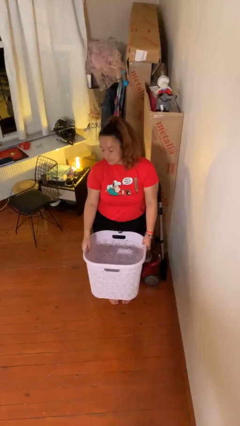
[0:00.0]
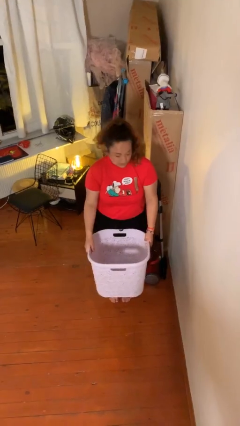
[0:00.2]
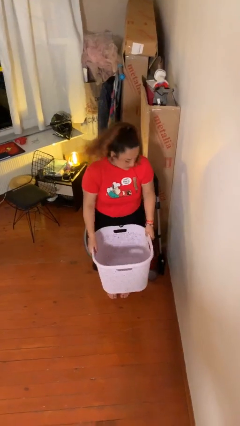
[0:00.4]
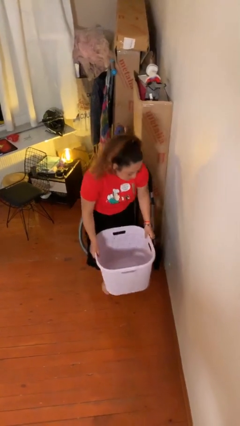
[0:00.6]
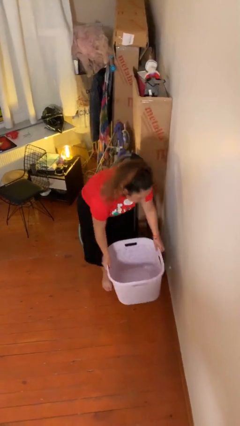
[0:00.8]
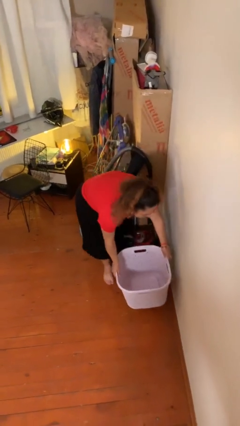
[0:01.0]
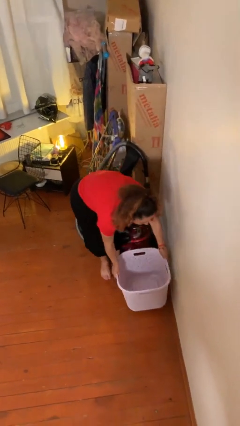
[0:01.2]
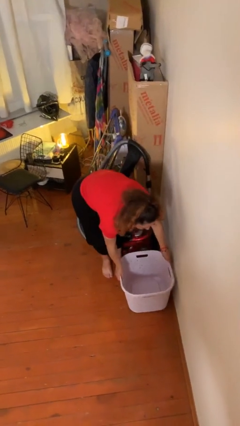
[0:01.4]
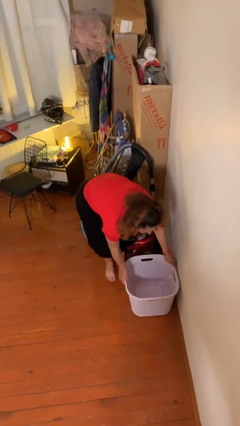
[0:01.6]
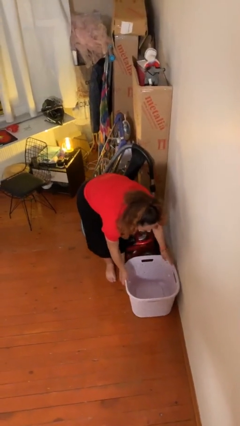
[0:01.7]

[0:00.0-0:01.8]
person puts down object on floor

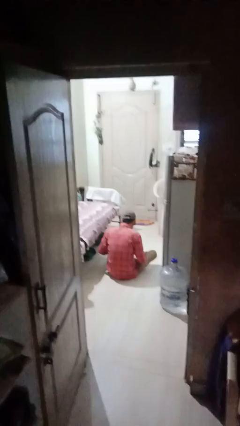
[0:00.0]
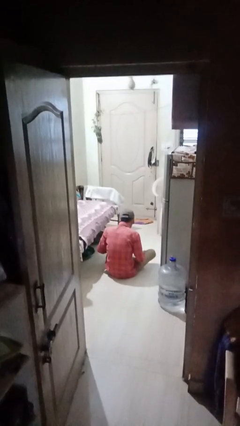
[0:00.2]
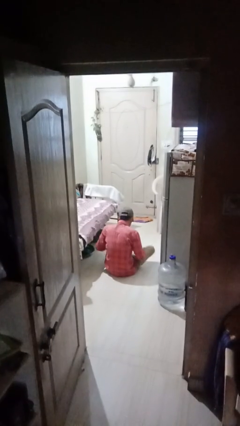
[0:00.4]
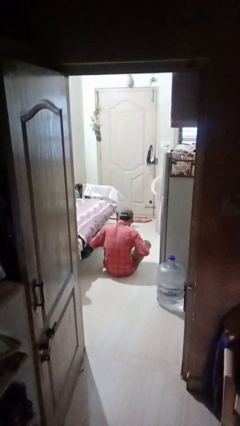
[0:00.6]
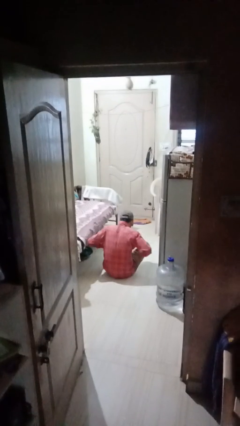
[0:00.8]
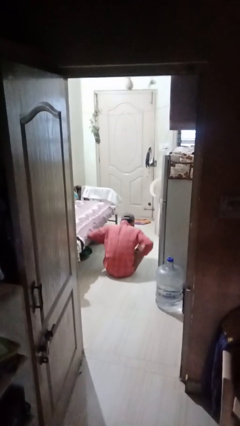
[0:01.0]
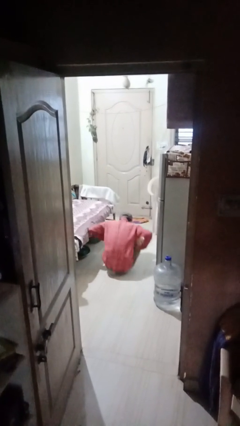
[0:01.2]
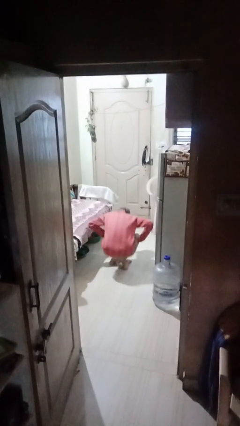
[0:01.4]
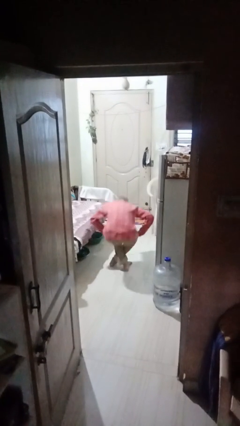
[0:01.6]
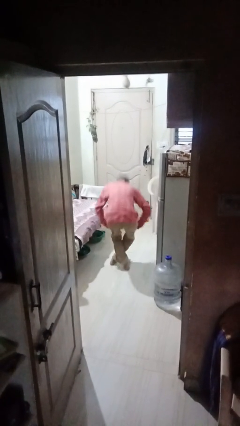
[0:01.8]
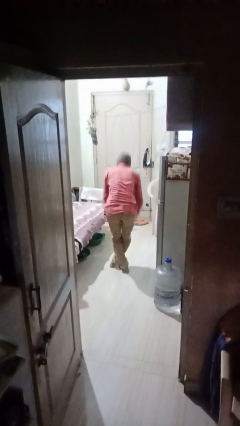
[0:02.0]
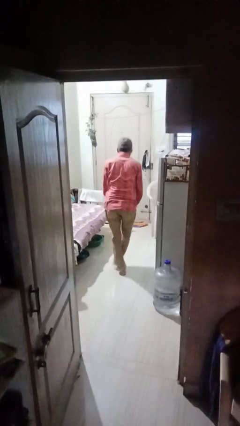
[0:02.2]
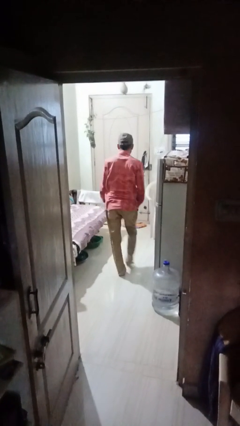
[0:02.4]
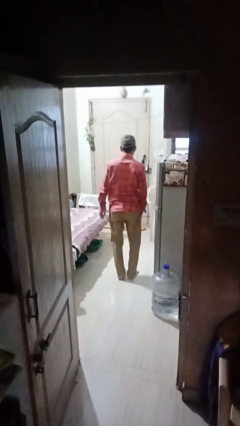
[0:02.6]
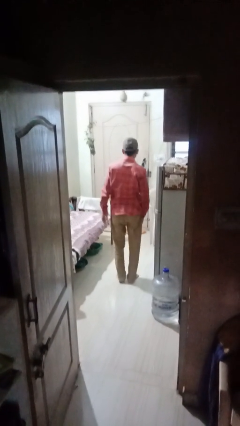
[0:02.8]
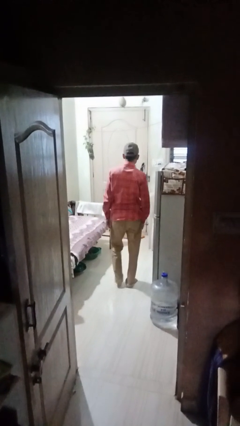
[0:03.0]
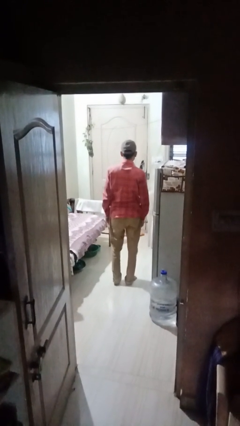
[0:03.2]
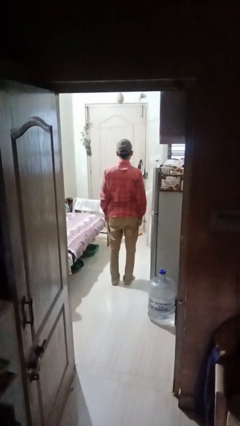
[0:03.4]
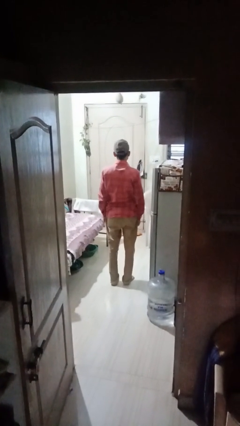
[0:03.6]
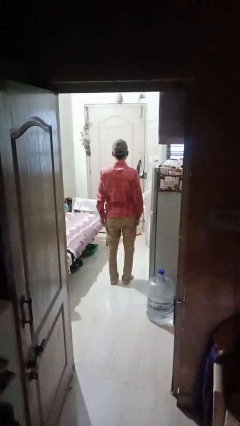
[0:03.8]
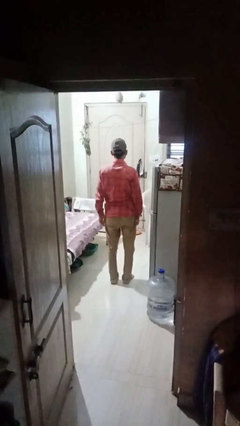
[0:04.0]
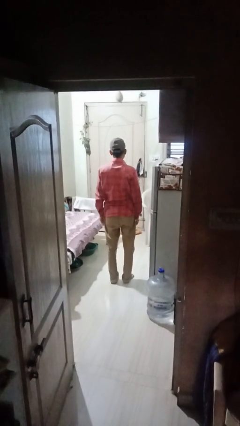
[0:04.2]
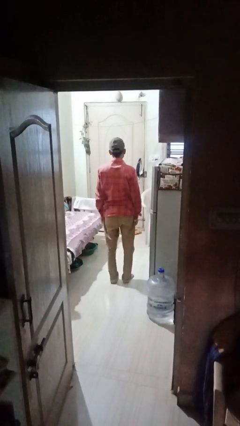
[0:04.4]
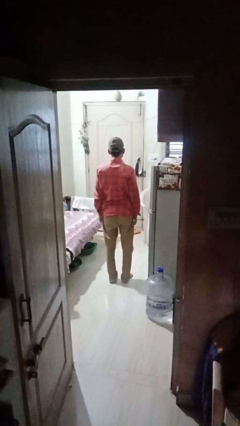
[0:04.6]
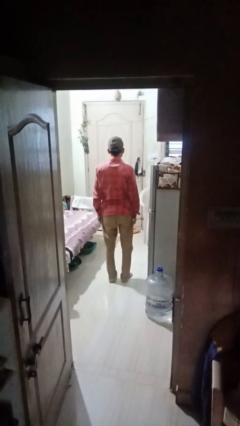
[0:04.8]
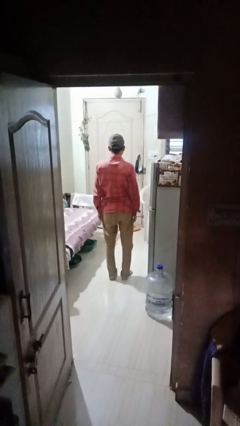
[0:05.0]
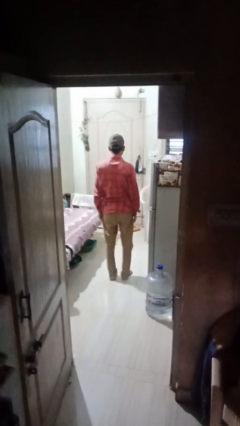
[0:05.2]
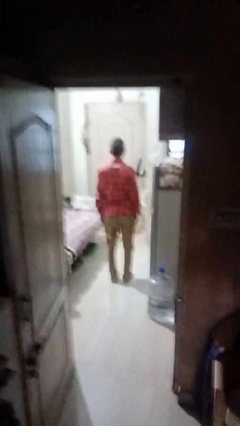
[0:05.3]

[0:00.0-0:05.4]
person stands up from floor

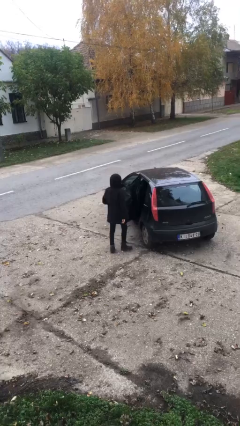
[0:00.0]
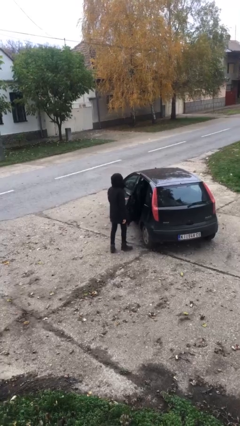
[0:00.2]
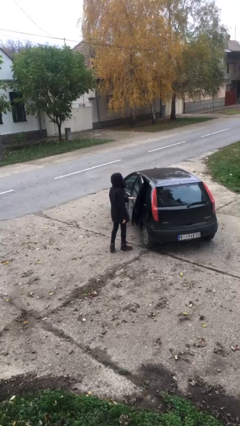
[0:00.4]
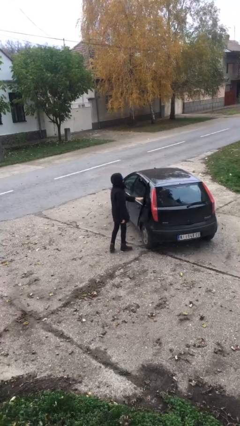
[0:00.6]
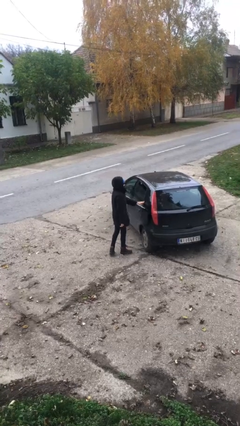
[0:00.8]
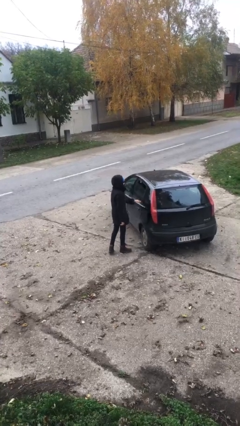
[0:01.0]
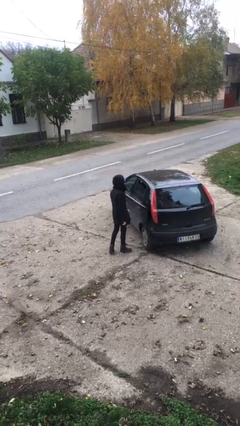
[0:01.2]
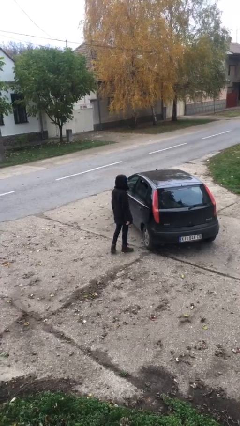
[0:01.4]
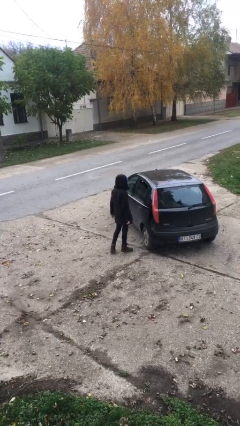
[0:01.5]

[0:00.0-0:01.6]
person closes car door

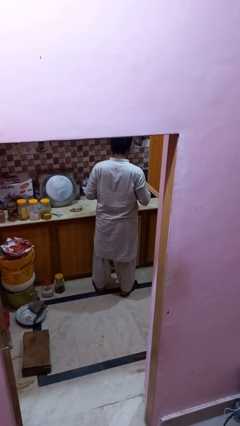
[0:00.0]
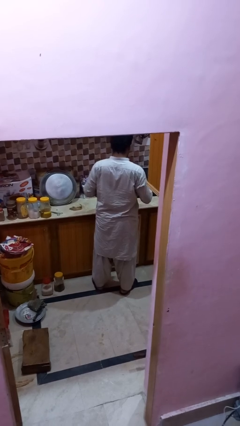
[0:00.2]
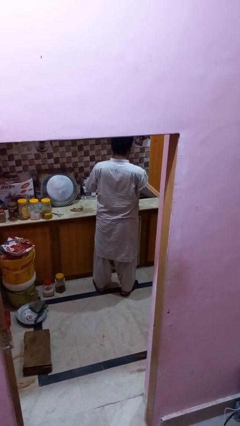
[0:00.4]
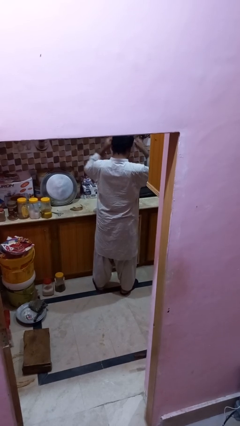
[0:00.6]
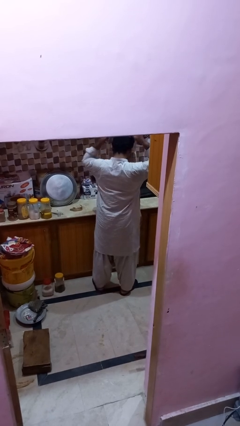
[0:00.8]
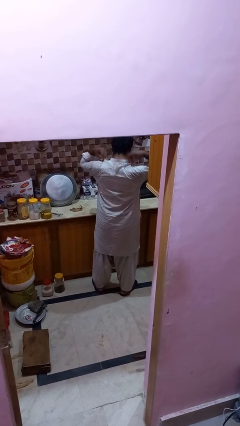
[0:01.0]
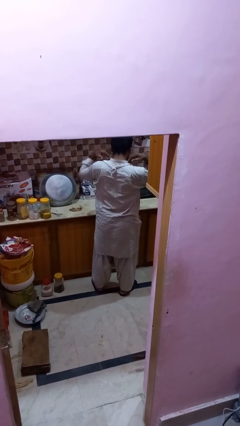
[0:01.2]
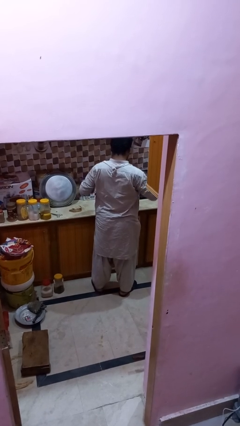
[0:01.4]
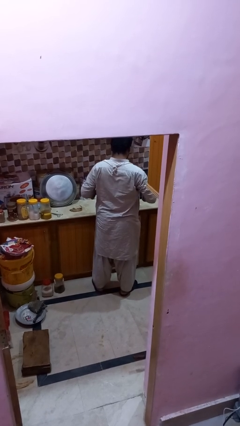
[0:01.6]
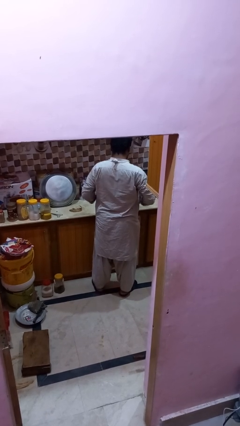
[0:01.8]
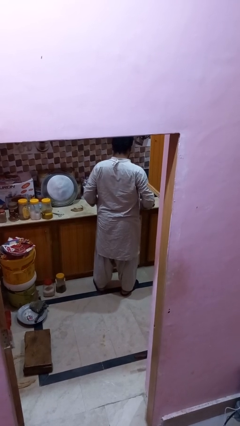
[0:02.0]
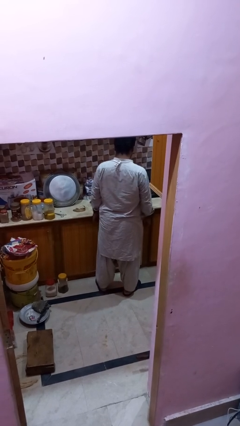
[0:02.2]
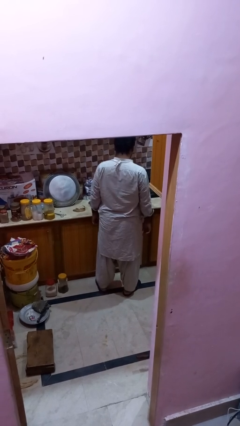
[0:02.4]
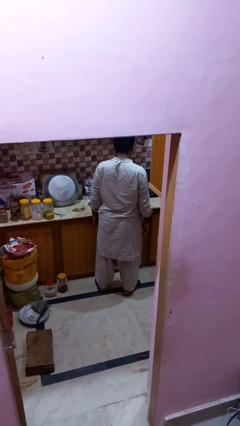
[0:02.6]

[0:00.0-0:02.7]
person puts on apron

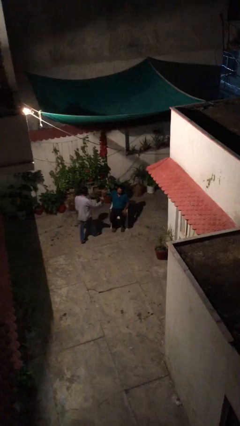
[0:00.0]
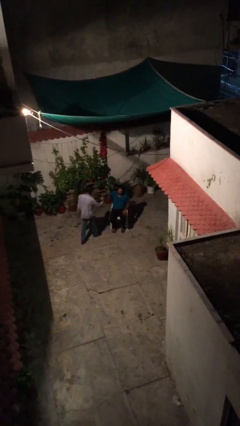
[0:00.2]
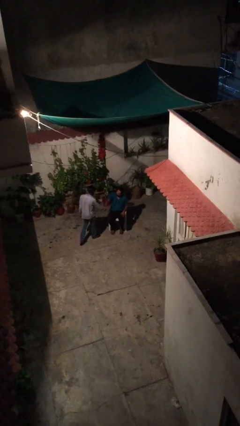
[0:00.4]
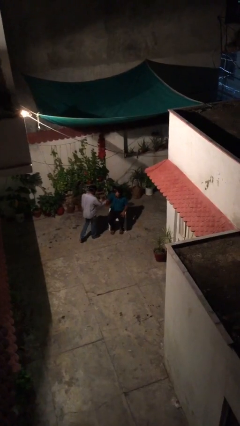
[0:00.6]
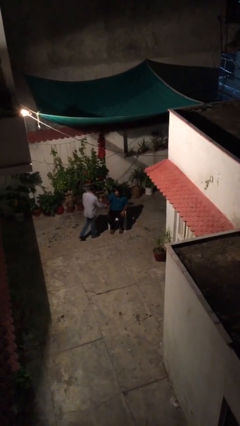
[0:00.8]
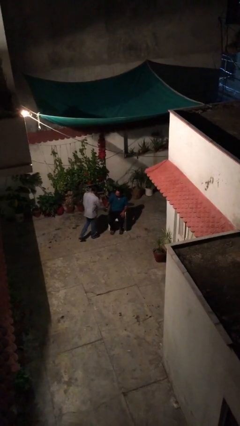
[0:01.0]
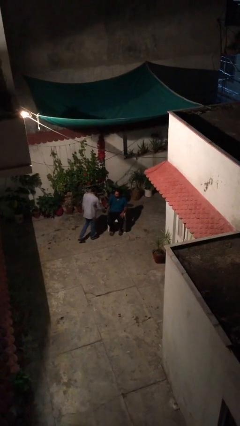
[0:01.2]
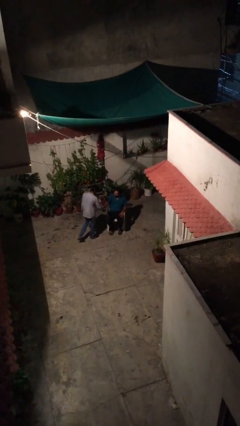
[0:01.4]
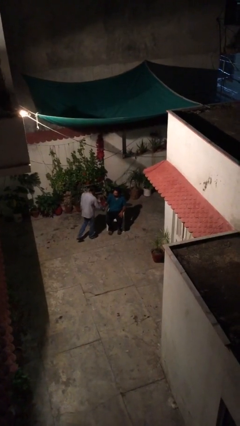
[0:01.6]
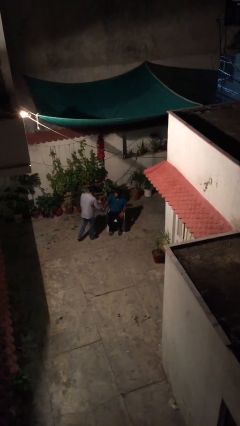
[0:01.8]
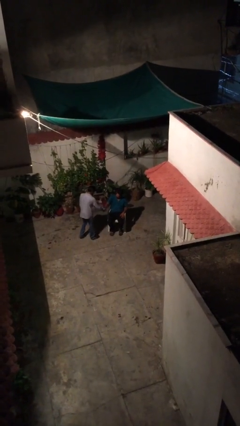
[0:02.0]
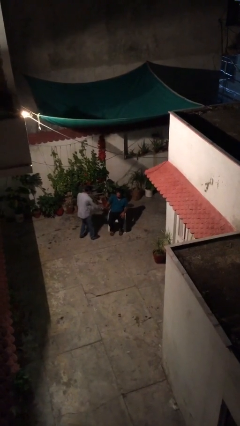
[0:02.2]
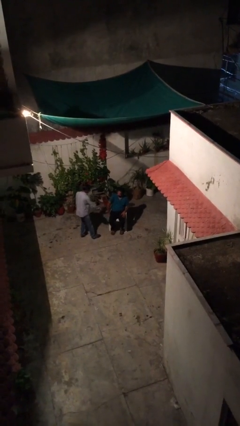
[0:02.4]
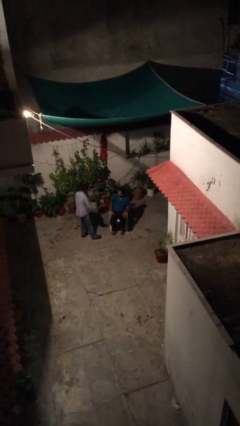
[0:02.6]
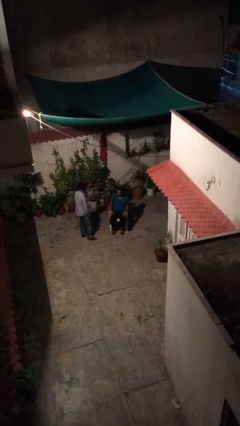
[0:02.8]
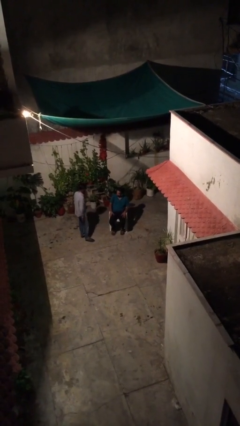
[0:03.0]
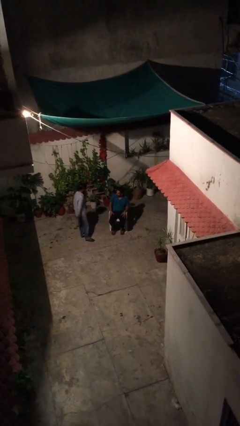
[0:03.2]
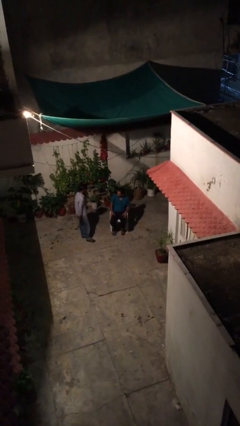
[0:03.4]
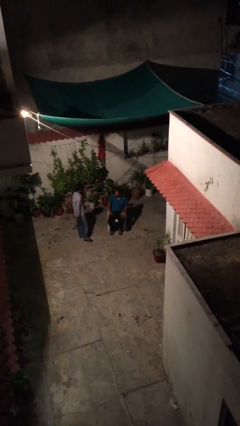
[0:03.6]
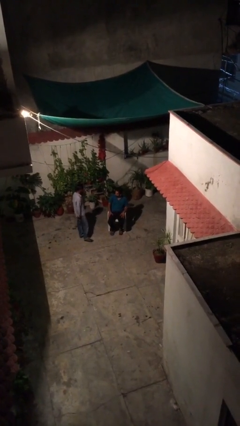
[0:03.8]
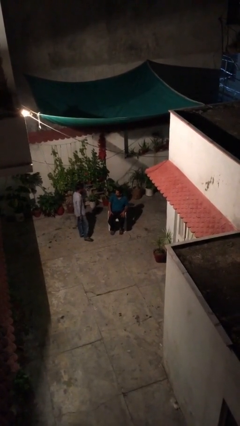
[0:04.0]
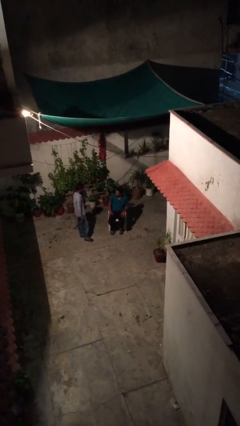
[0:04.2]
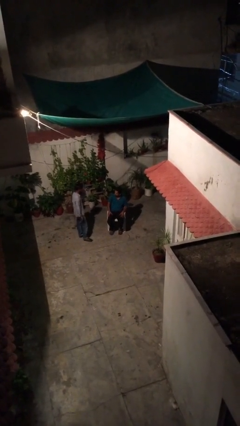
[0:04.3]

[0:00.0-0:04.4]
person shakes hand

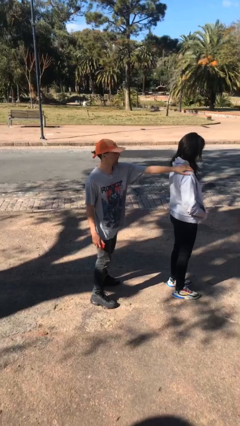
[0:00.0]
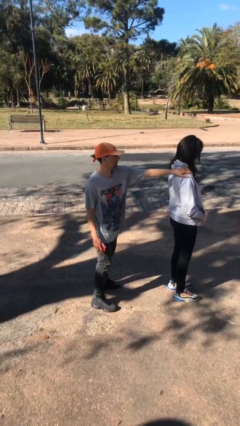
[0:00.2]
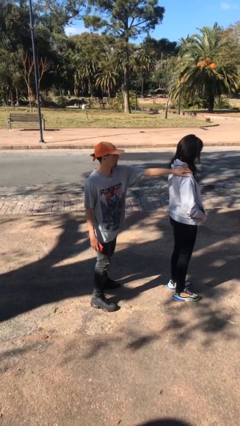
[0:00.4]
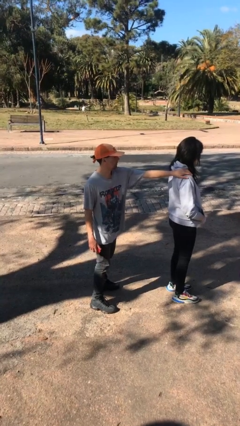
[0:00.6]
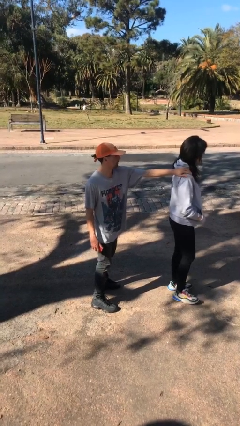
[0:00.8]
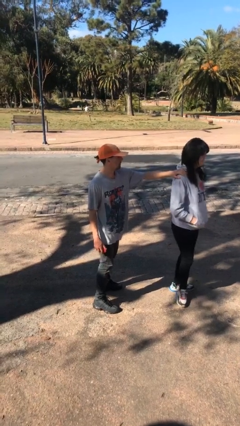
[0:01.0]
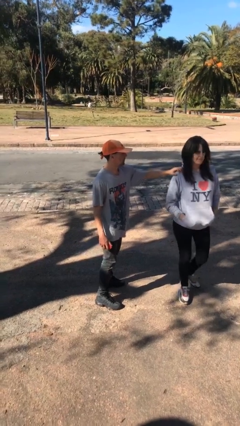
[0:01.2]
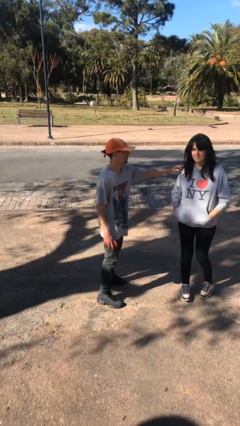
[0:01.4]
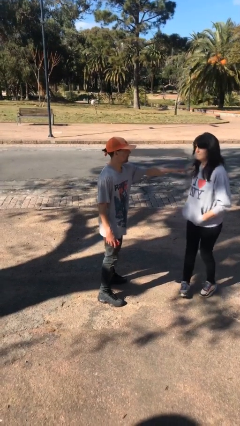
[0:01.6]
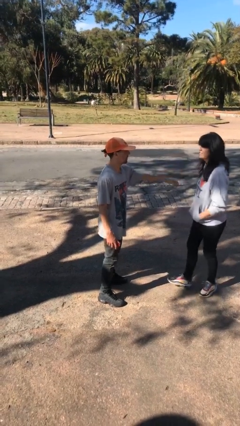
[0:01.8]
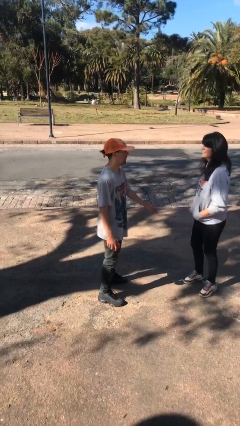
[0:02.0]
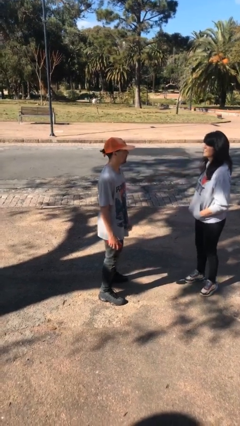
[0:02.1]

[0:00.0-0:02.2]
person spins person around
